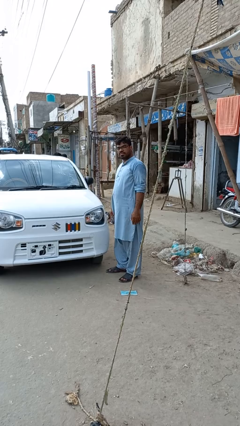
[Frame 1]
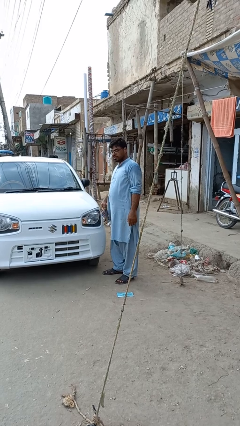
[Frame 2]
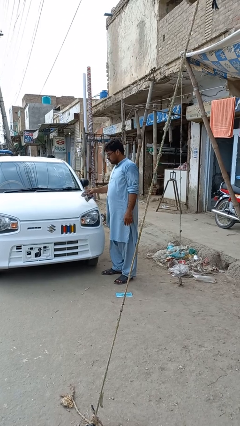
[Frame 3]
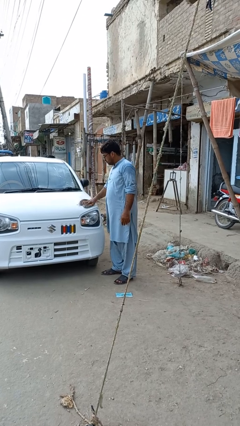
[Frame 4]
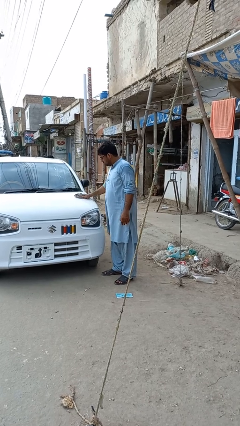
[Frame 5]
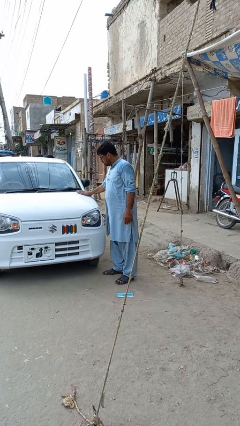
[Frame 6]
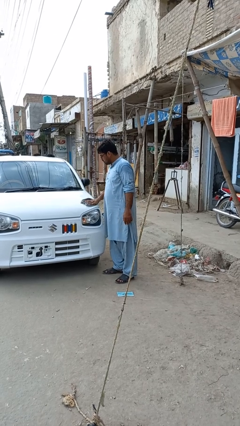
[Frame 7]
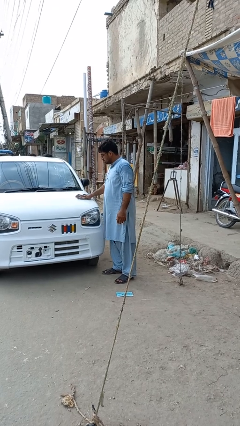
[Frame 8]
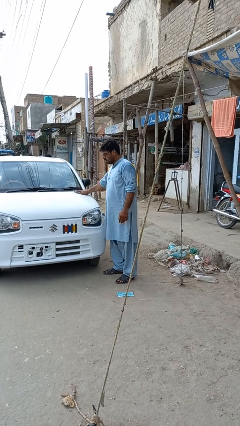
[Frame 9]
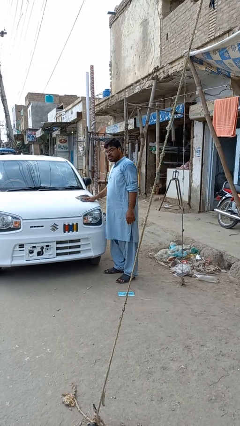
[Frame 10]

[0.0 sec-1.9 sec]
person polishes car with rag

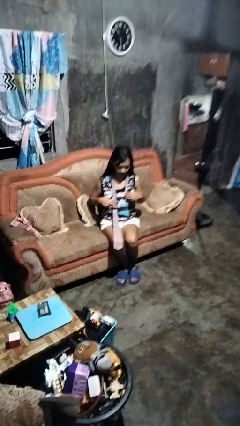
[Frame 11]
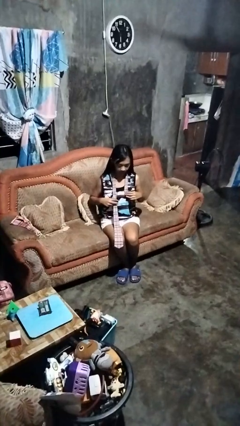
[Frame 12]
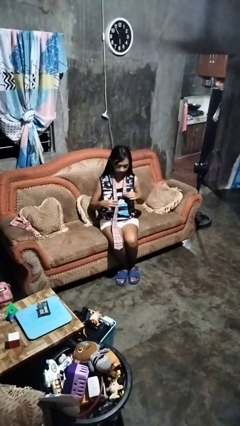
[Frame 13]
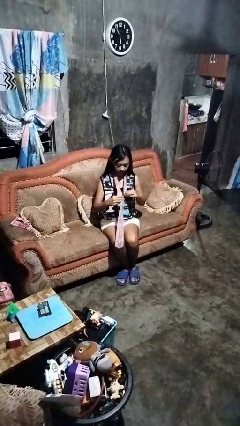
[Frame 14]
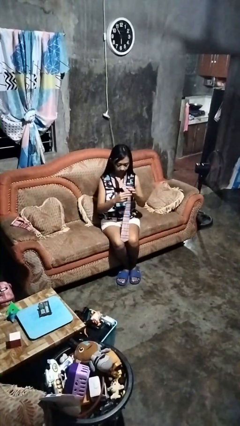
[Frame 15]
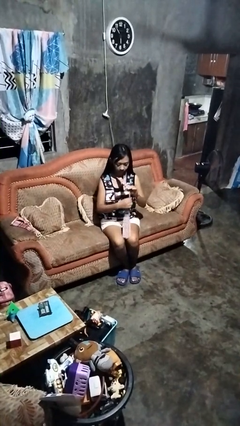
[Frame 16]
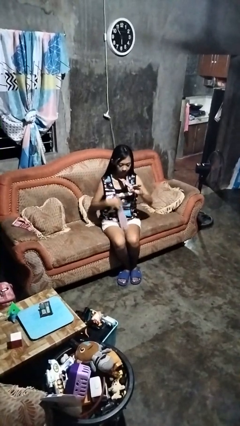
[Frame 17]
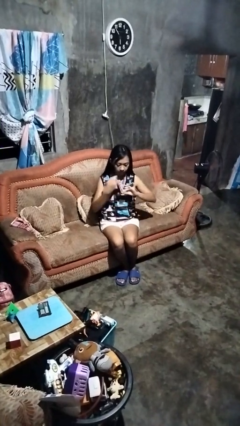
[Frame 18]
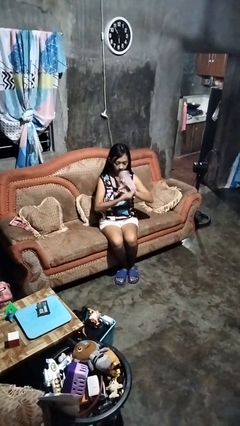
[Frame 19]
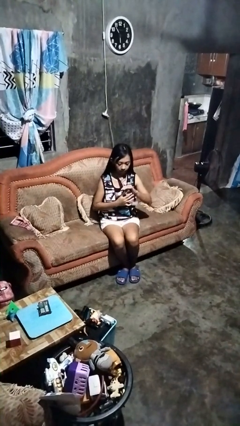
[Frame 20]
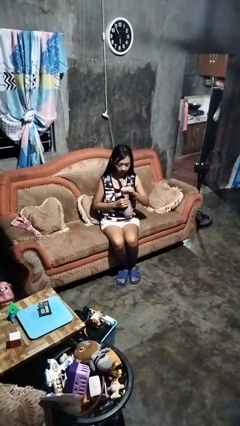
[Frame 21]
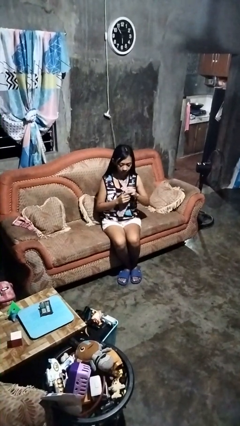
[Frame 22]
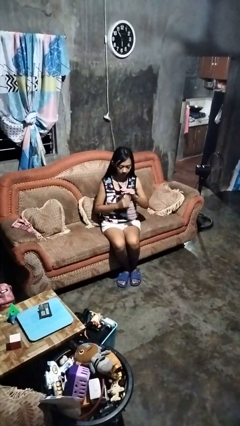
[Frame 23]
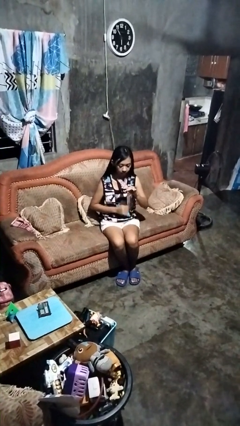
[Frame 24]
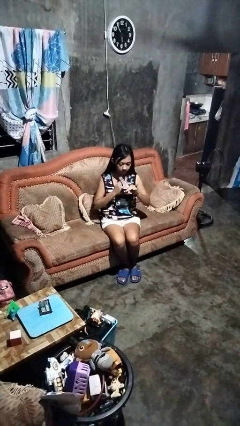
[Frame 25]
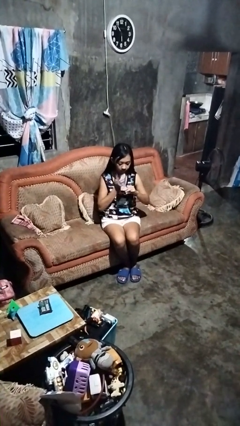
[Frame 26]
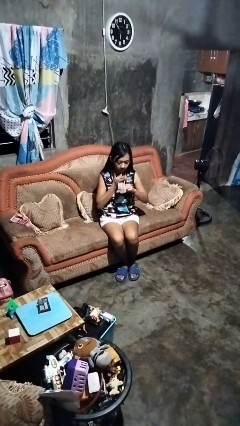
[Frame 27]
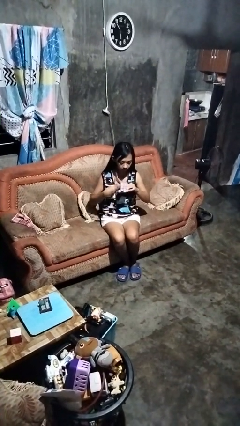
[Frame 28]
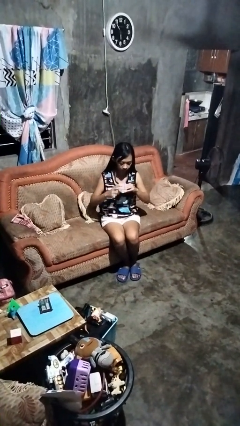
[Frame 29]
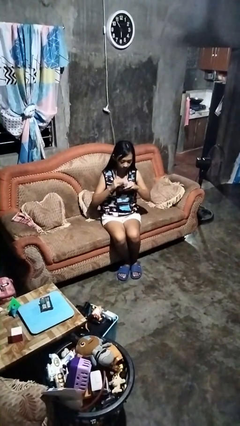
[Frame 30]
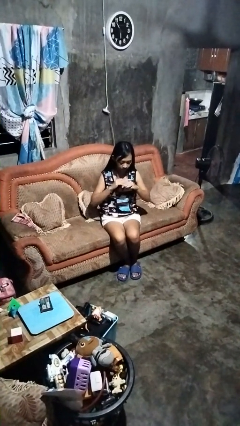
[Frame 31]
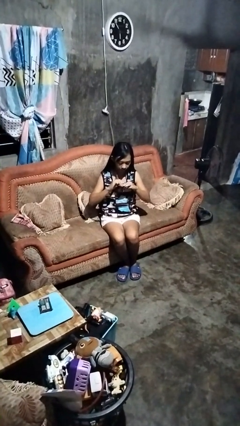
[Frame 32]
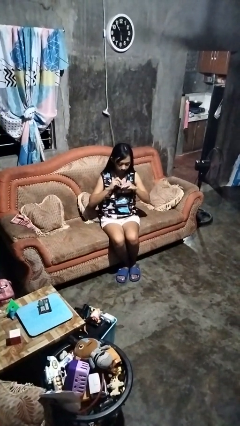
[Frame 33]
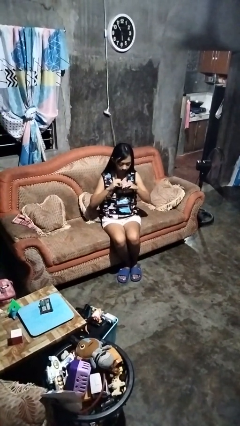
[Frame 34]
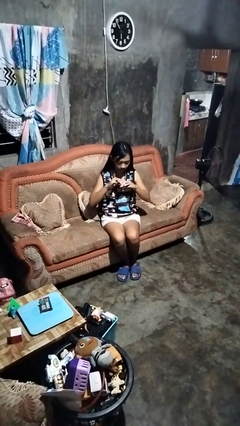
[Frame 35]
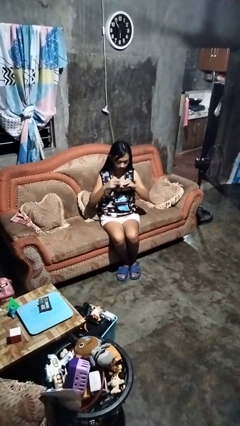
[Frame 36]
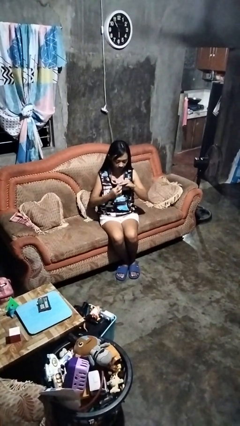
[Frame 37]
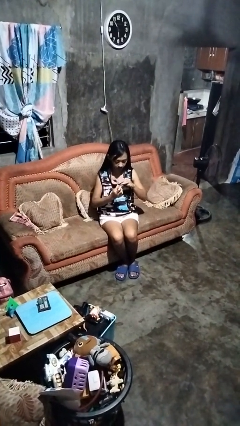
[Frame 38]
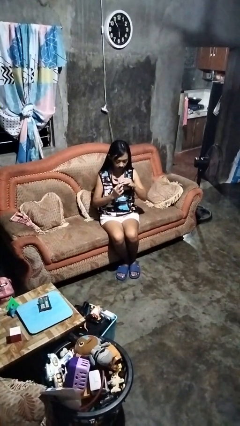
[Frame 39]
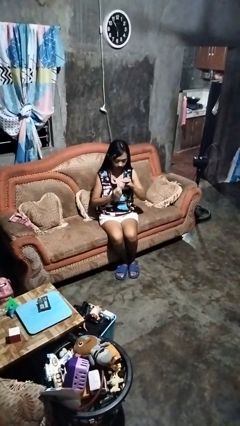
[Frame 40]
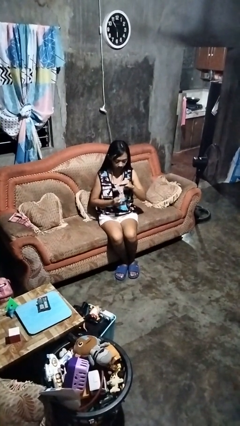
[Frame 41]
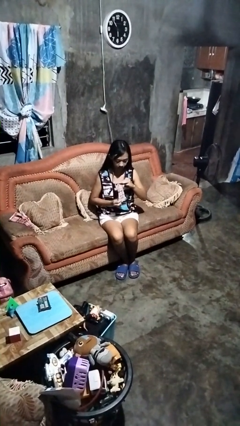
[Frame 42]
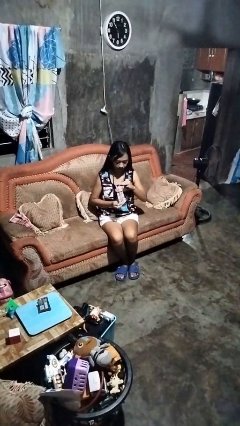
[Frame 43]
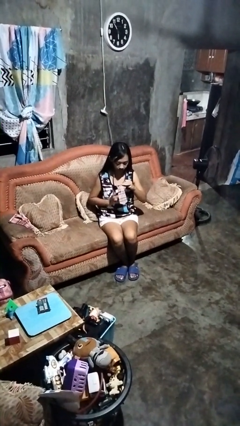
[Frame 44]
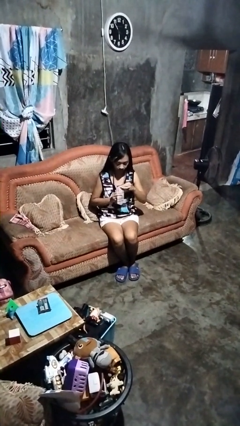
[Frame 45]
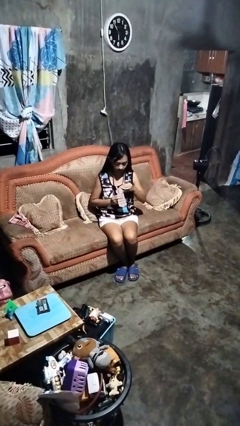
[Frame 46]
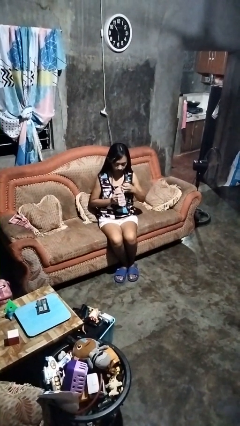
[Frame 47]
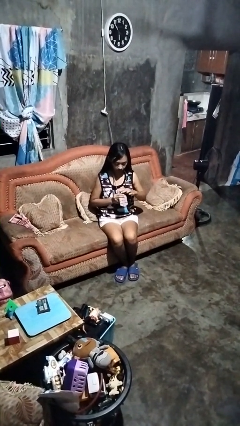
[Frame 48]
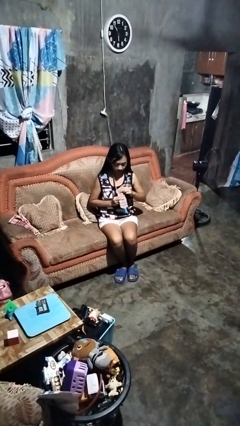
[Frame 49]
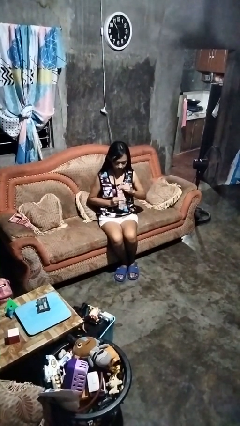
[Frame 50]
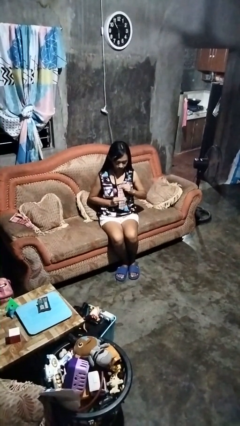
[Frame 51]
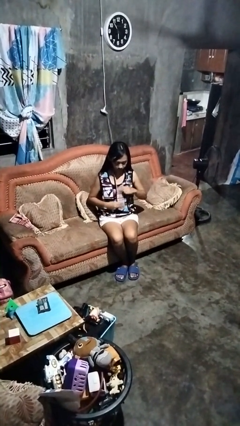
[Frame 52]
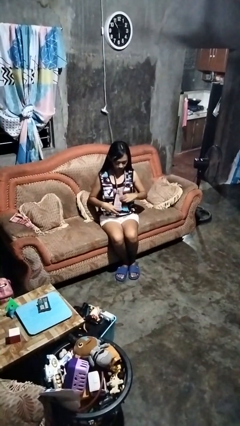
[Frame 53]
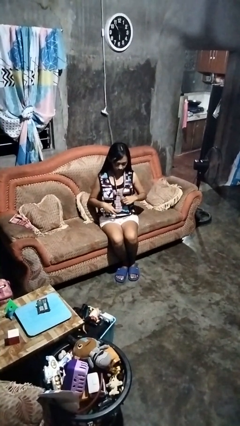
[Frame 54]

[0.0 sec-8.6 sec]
person puts on necktie

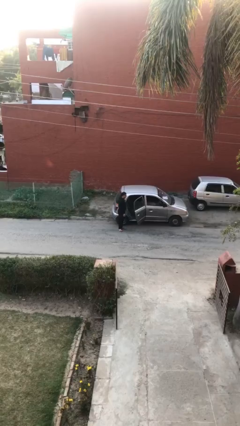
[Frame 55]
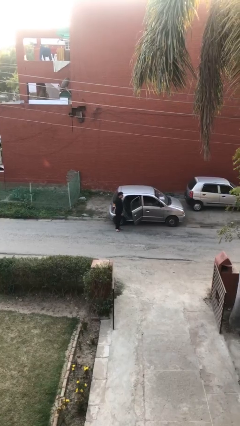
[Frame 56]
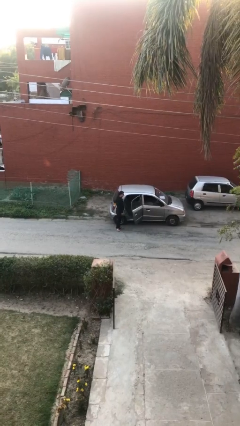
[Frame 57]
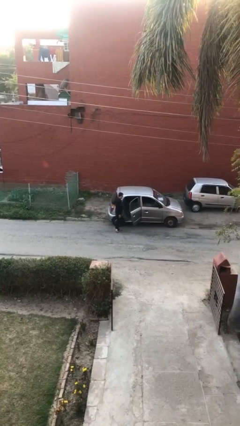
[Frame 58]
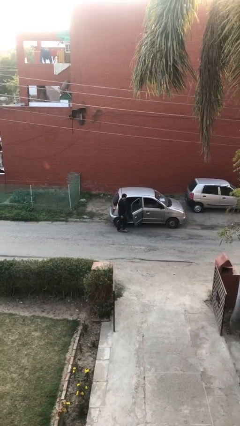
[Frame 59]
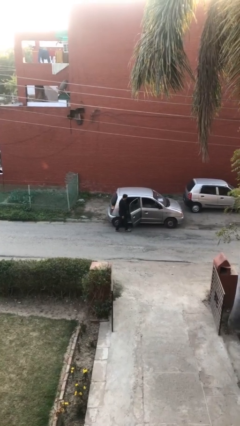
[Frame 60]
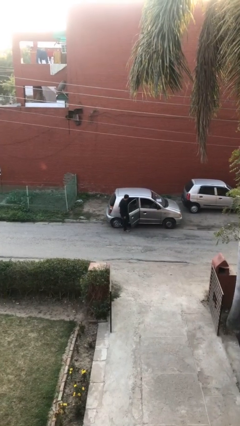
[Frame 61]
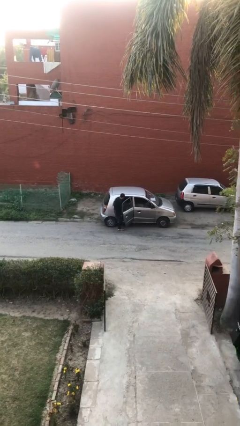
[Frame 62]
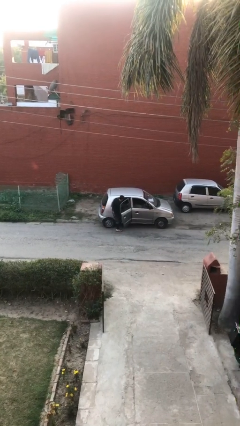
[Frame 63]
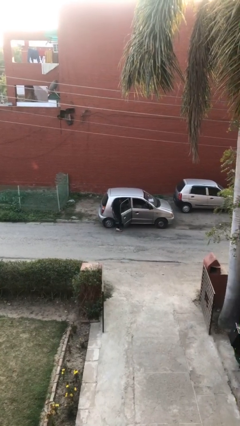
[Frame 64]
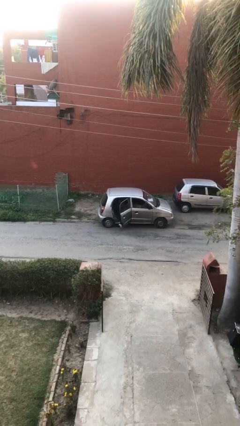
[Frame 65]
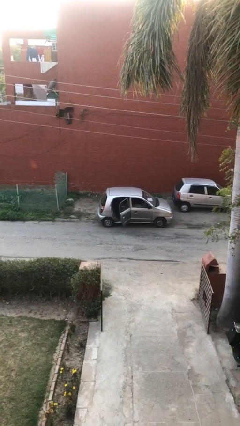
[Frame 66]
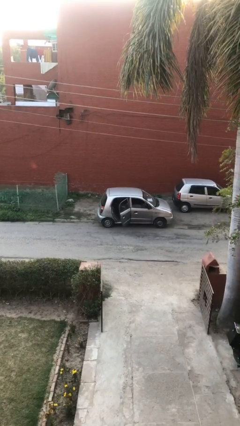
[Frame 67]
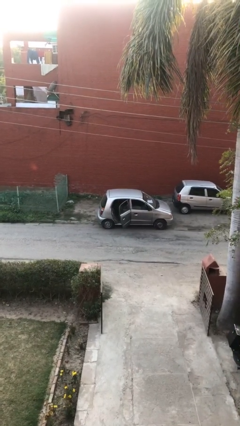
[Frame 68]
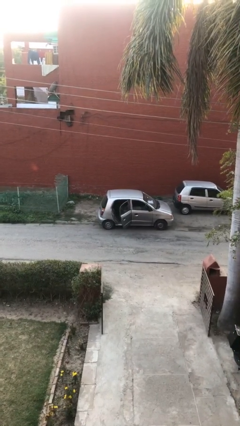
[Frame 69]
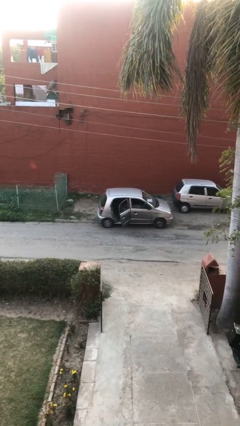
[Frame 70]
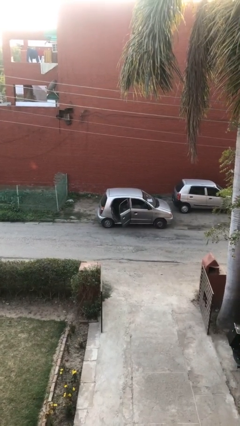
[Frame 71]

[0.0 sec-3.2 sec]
person enters car

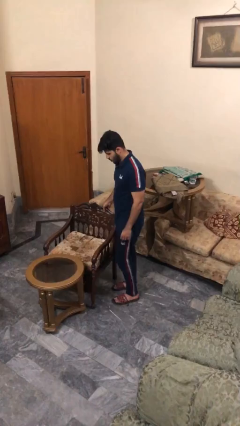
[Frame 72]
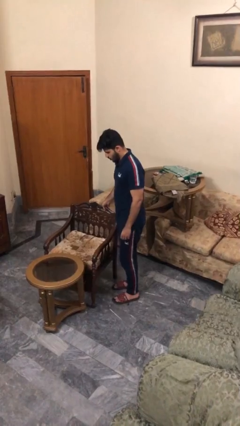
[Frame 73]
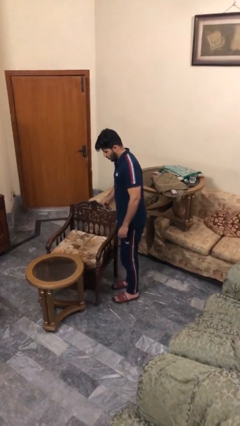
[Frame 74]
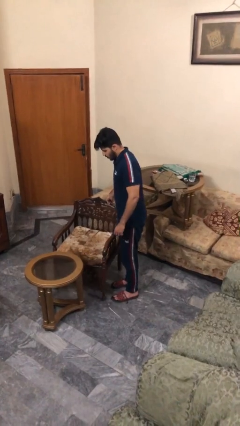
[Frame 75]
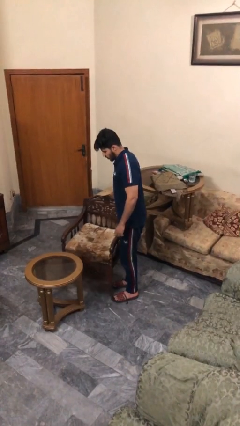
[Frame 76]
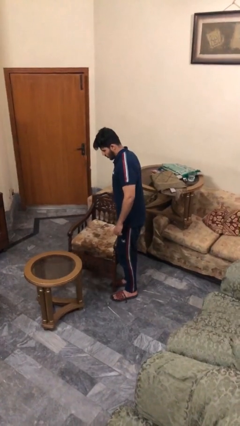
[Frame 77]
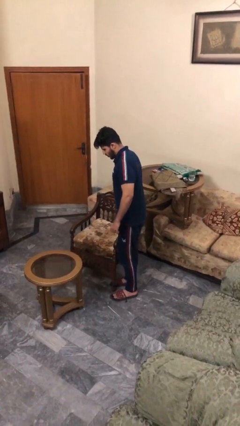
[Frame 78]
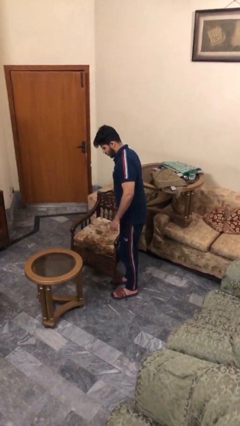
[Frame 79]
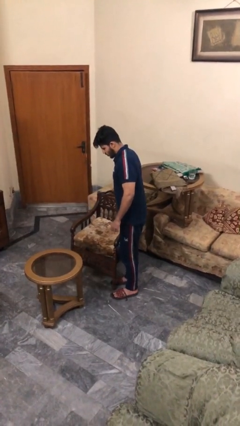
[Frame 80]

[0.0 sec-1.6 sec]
person pulls out chair

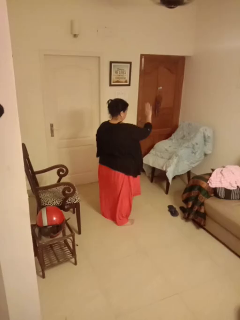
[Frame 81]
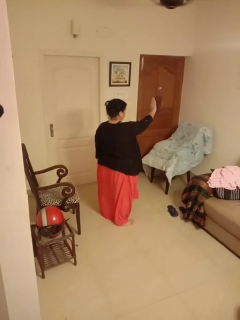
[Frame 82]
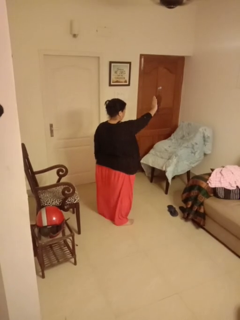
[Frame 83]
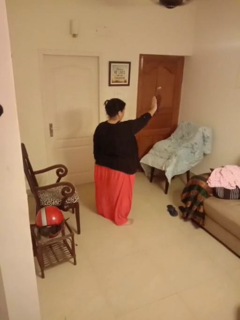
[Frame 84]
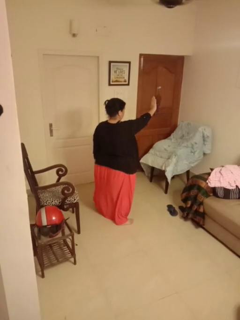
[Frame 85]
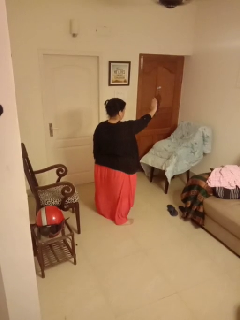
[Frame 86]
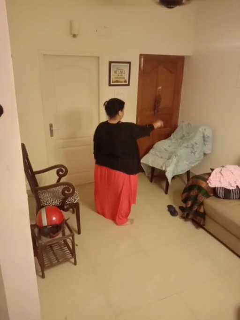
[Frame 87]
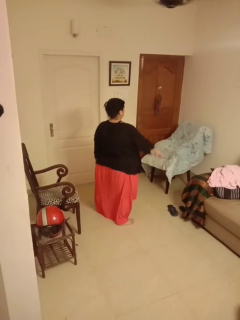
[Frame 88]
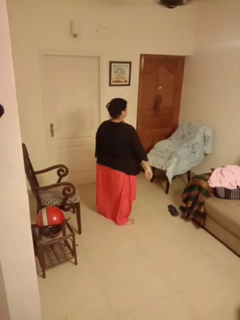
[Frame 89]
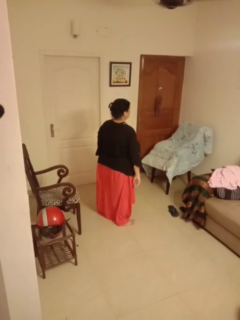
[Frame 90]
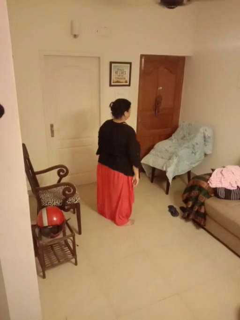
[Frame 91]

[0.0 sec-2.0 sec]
person gestures stop

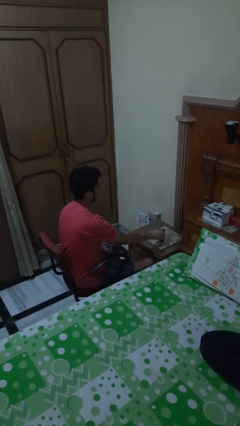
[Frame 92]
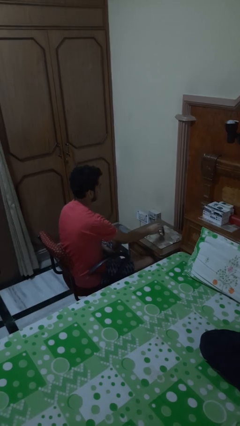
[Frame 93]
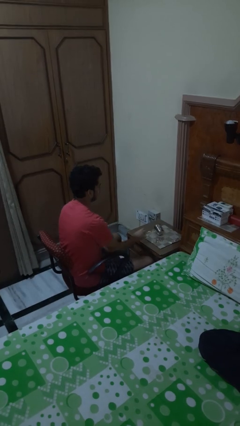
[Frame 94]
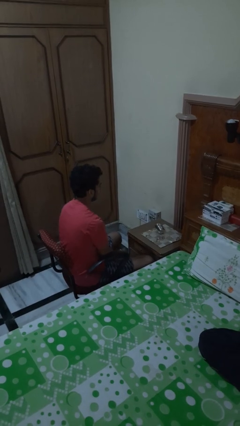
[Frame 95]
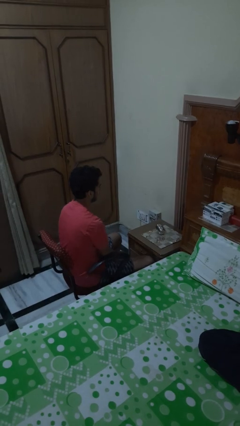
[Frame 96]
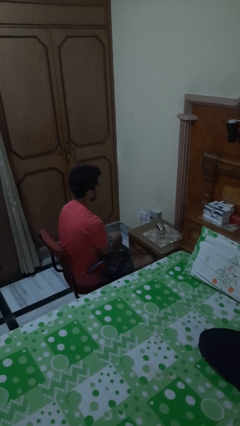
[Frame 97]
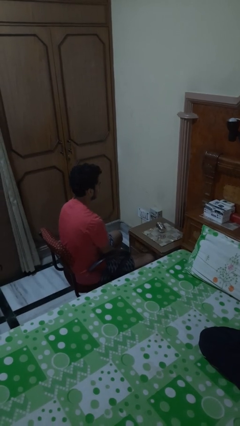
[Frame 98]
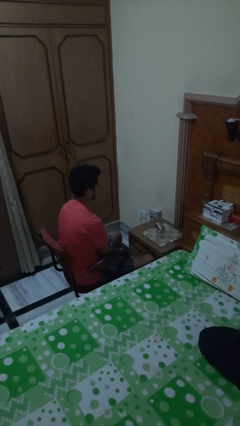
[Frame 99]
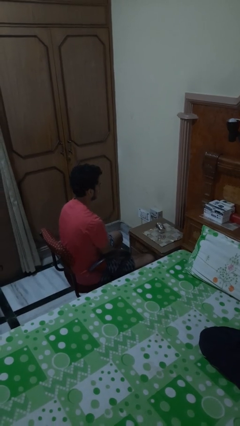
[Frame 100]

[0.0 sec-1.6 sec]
person knocks over glass
